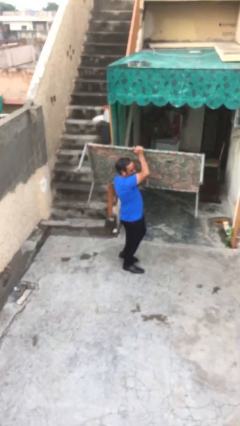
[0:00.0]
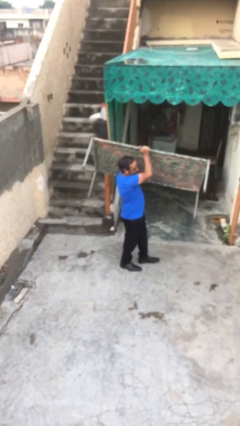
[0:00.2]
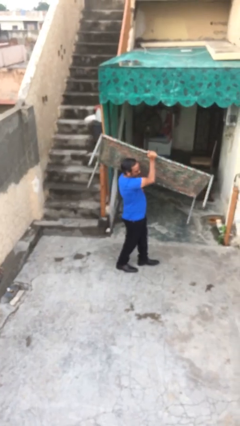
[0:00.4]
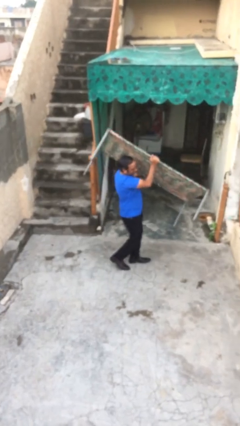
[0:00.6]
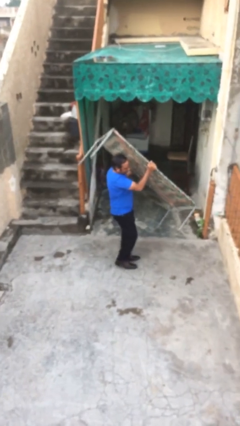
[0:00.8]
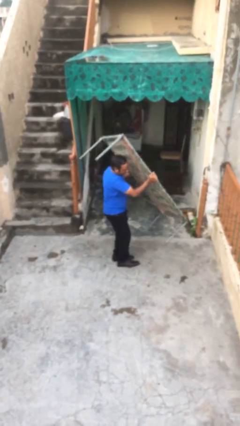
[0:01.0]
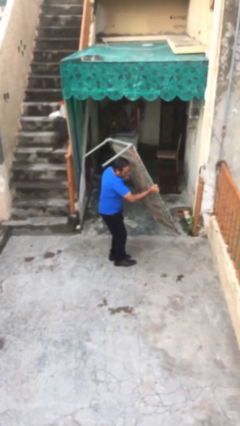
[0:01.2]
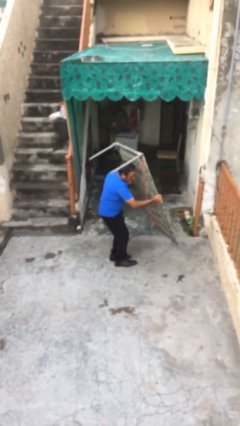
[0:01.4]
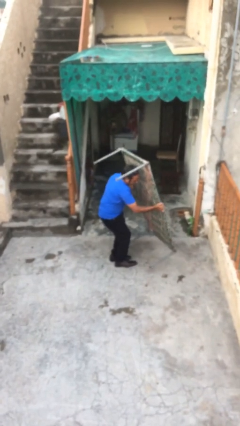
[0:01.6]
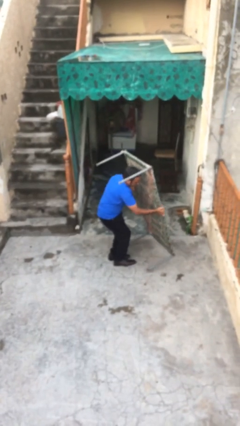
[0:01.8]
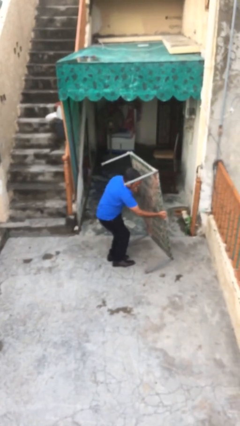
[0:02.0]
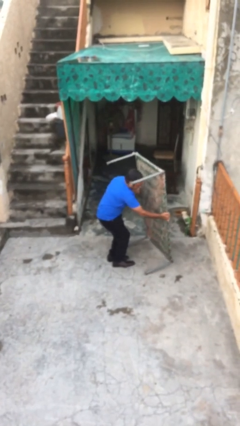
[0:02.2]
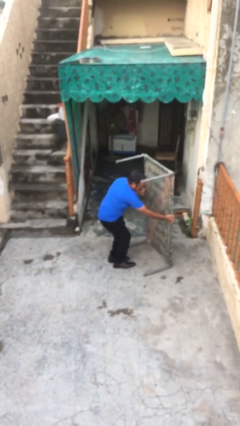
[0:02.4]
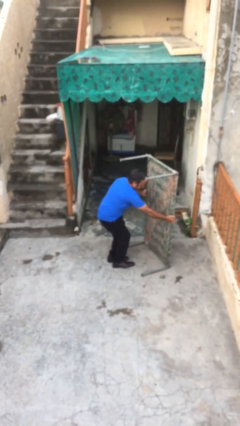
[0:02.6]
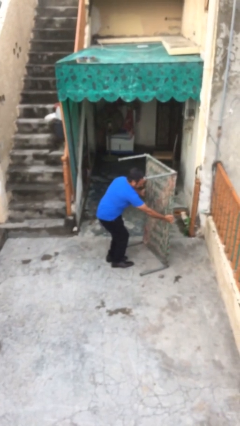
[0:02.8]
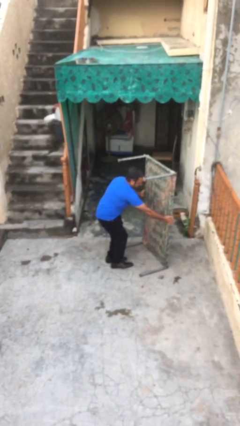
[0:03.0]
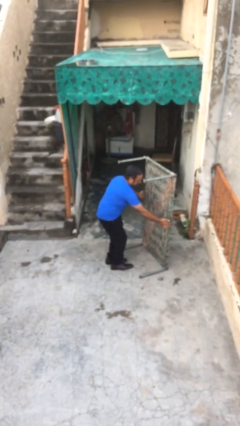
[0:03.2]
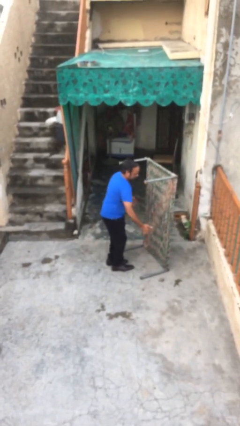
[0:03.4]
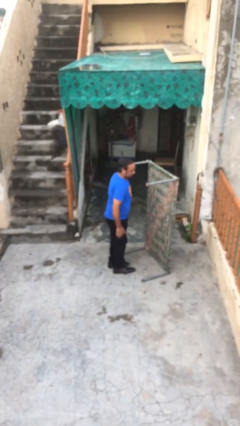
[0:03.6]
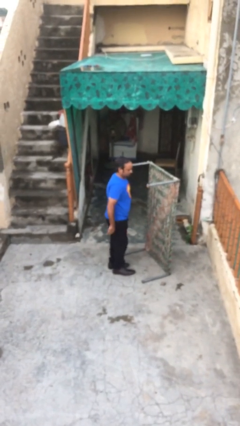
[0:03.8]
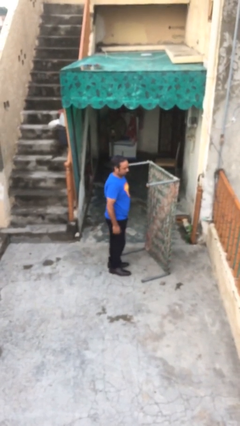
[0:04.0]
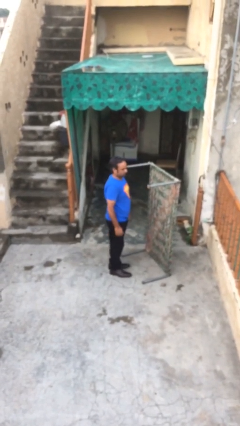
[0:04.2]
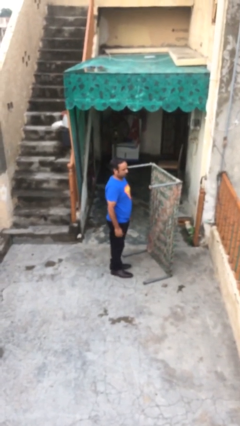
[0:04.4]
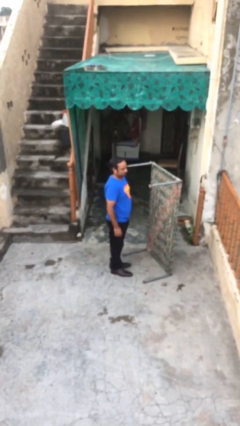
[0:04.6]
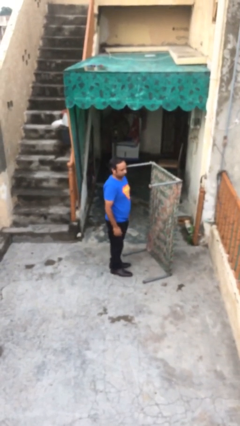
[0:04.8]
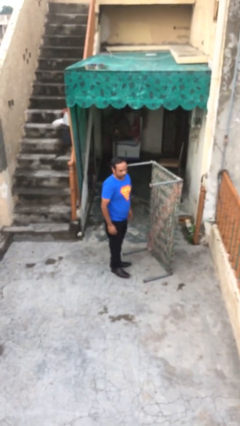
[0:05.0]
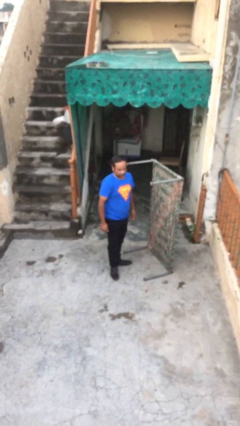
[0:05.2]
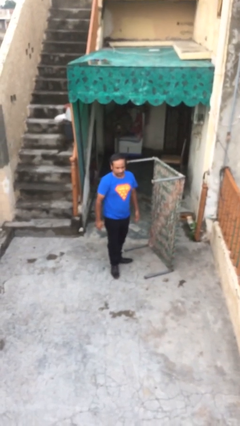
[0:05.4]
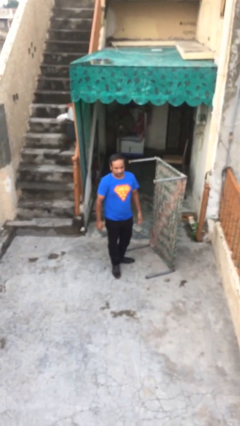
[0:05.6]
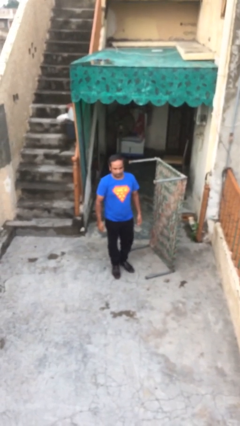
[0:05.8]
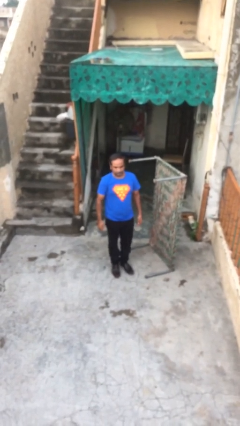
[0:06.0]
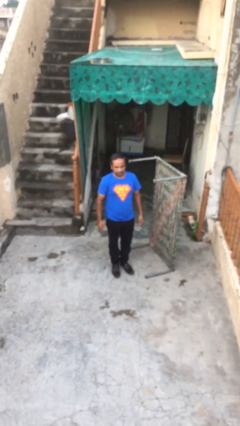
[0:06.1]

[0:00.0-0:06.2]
person puts down object on floor

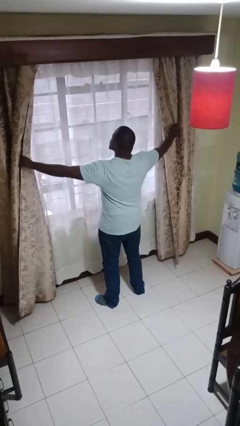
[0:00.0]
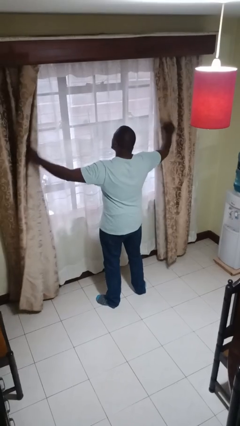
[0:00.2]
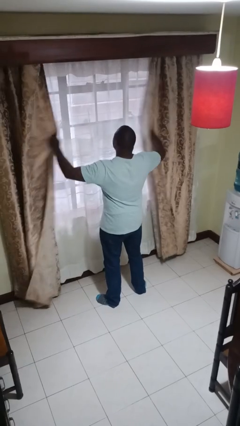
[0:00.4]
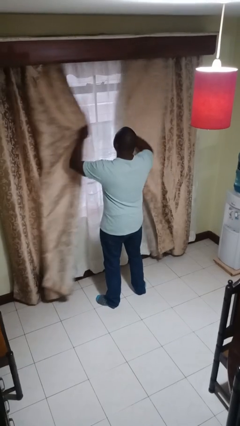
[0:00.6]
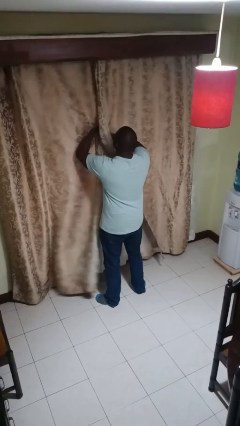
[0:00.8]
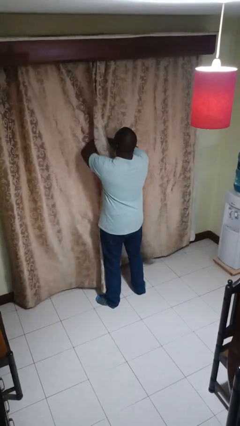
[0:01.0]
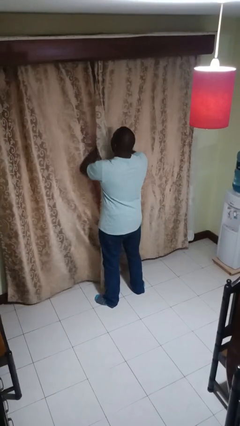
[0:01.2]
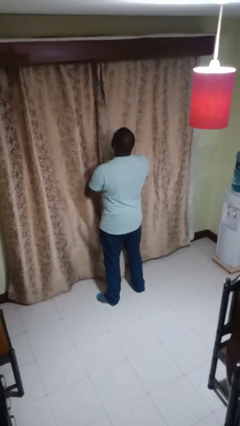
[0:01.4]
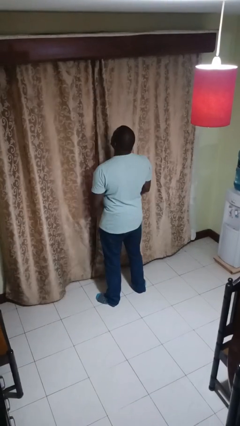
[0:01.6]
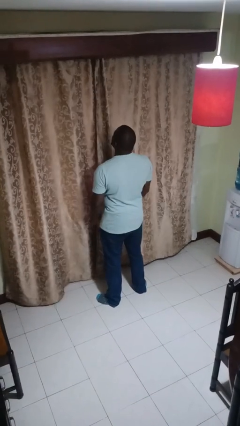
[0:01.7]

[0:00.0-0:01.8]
person closes curtains

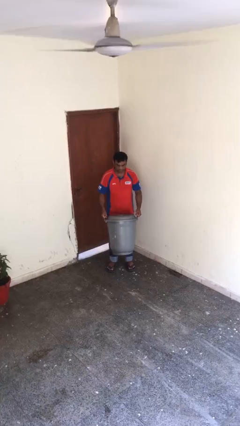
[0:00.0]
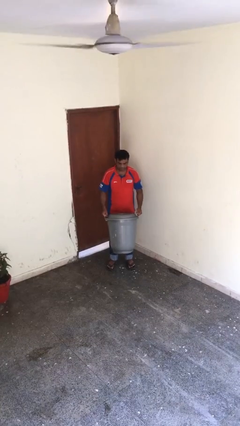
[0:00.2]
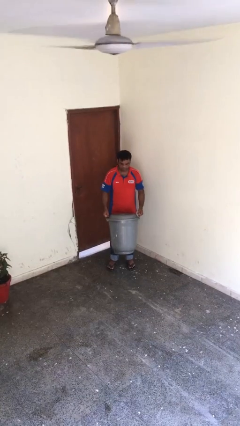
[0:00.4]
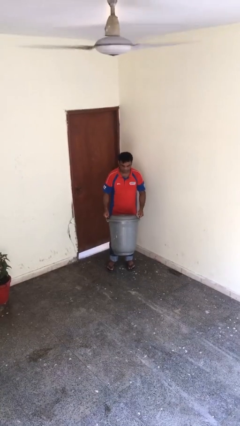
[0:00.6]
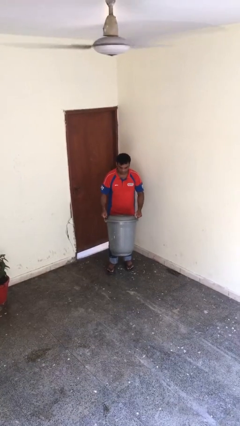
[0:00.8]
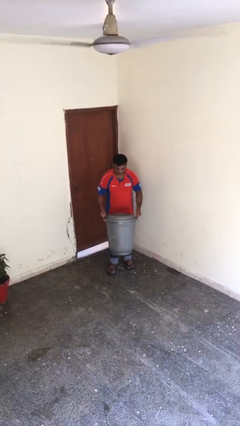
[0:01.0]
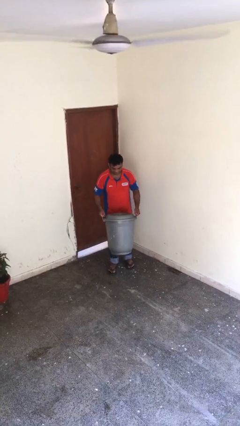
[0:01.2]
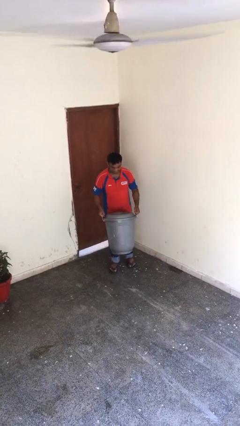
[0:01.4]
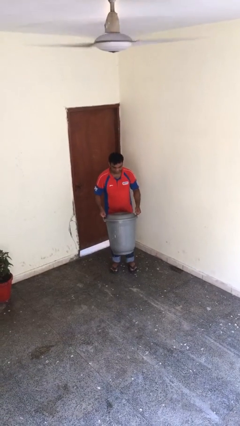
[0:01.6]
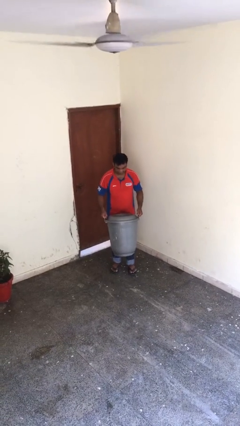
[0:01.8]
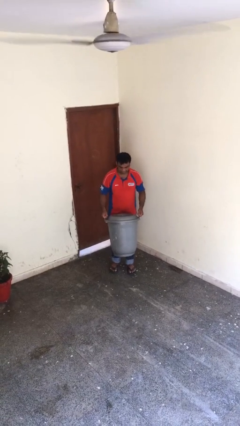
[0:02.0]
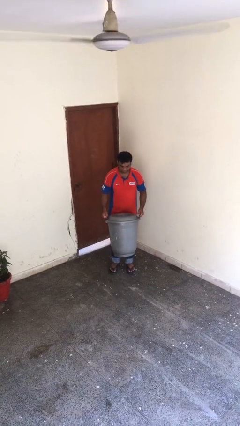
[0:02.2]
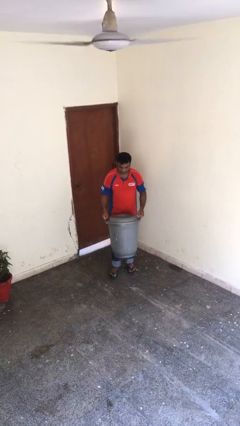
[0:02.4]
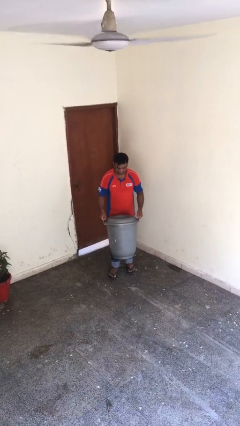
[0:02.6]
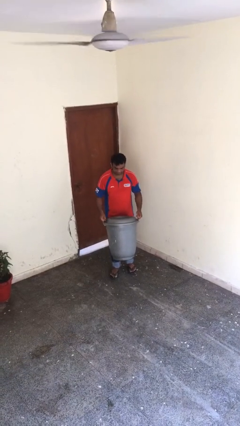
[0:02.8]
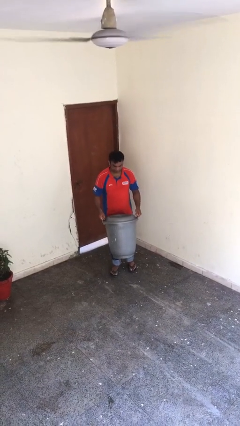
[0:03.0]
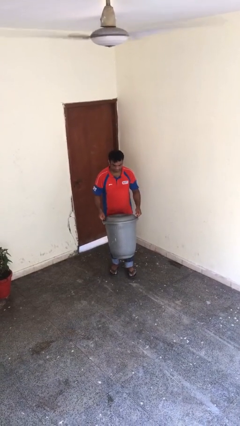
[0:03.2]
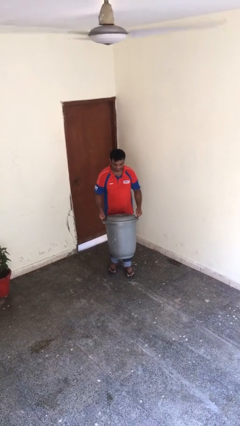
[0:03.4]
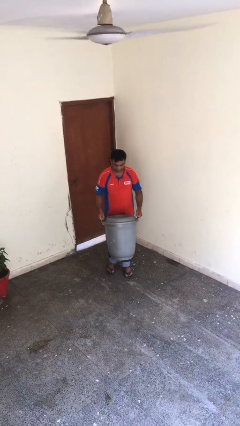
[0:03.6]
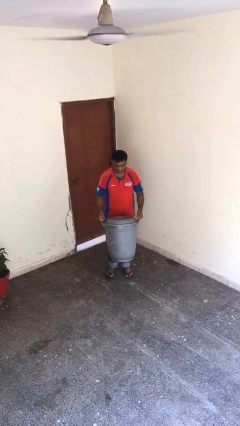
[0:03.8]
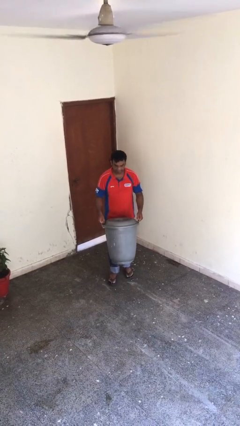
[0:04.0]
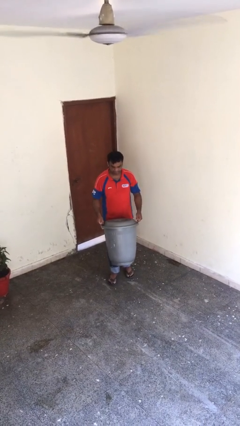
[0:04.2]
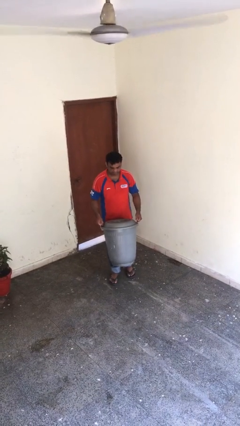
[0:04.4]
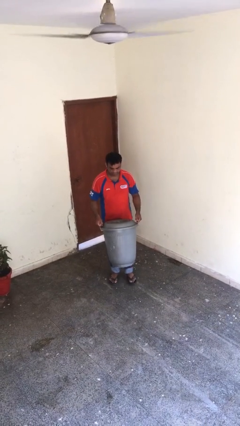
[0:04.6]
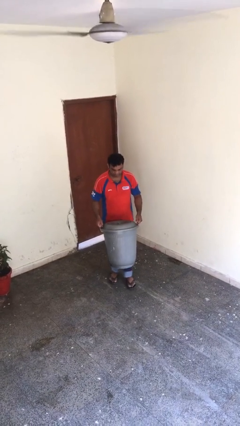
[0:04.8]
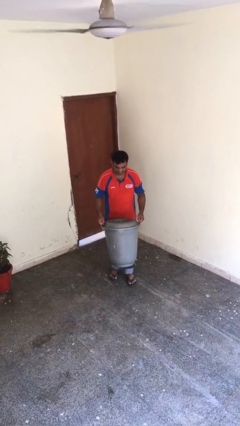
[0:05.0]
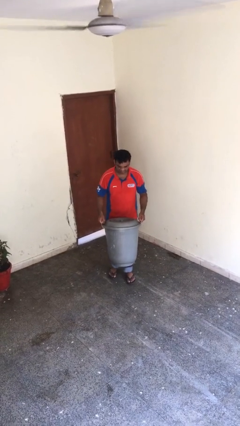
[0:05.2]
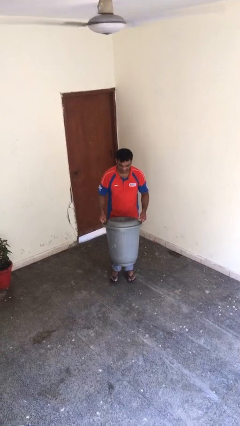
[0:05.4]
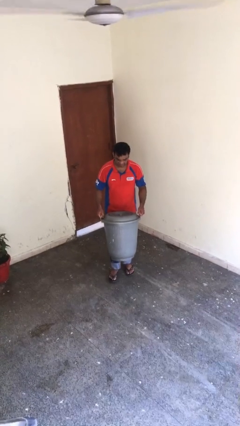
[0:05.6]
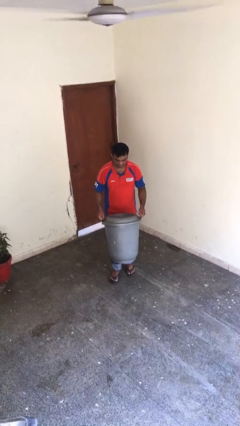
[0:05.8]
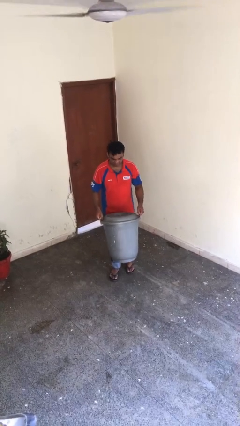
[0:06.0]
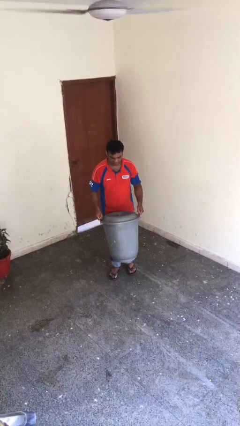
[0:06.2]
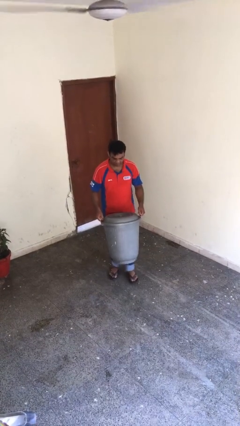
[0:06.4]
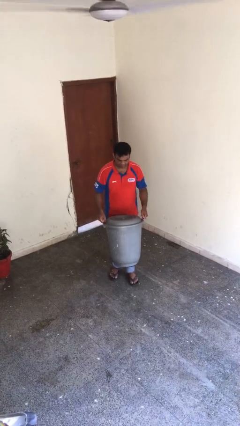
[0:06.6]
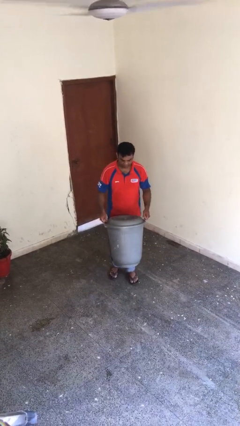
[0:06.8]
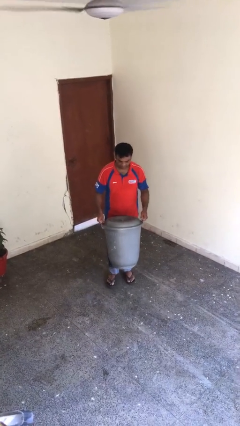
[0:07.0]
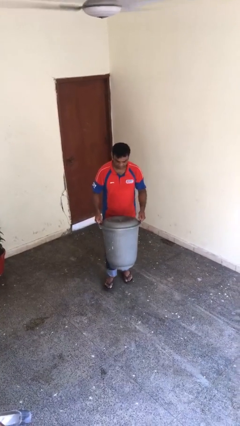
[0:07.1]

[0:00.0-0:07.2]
person carries heavy object

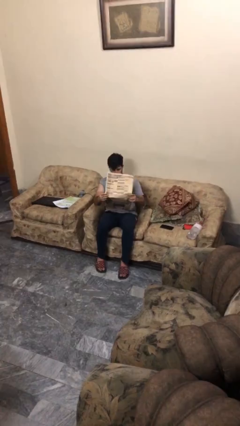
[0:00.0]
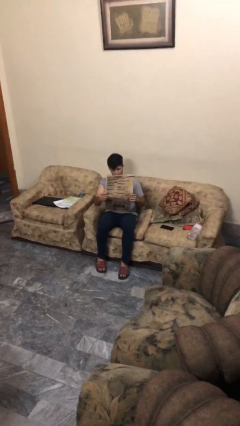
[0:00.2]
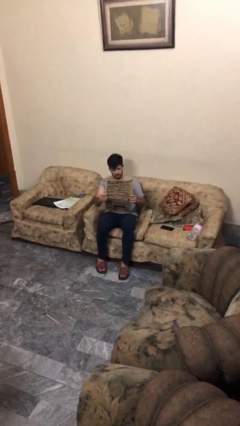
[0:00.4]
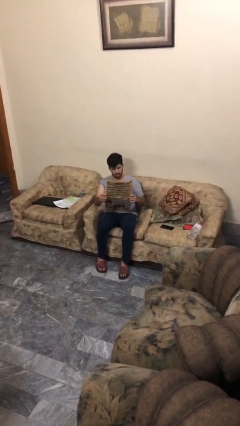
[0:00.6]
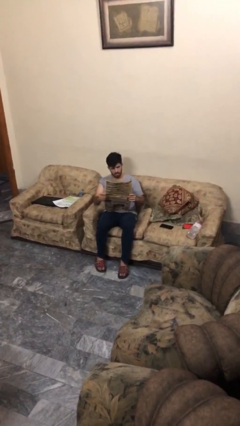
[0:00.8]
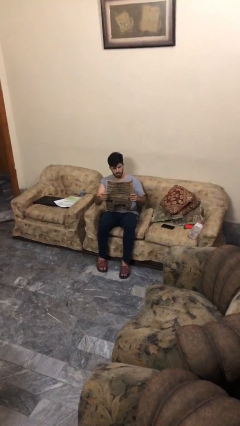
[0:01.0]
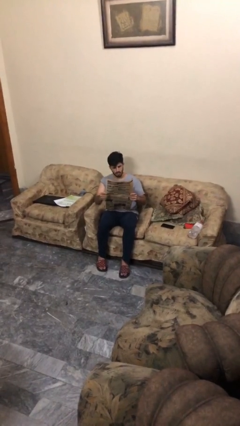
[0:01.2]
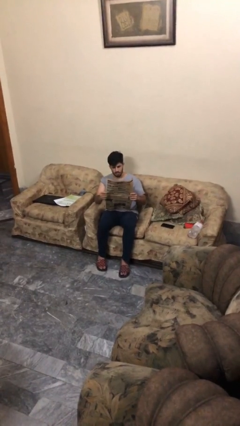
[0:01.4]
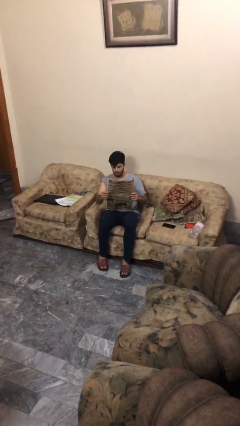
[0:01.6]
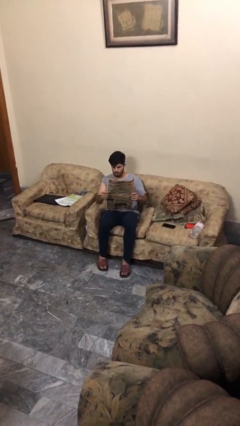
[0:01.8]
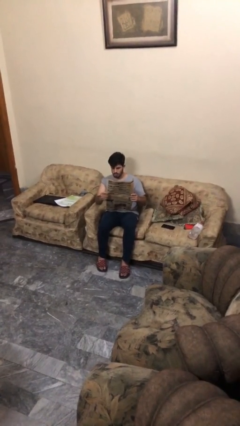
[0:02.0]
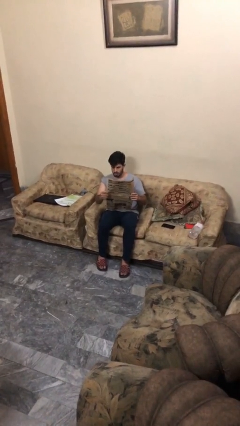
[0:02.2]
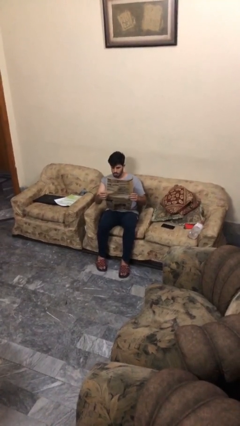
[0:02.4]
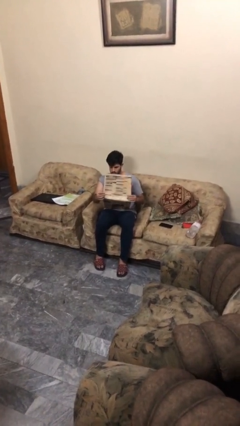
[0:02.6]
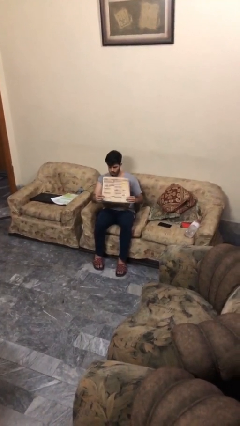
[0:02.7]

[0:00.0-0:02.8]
person reads newspaper
